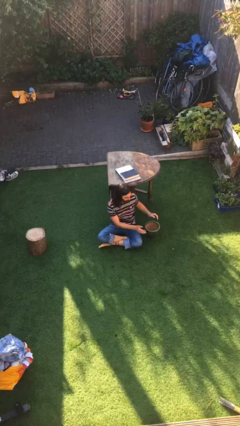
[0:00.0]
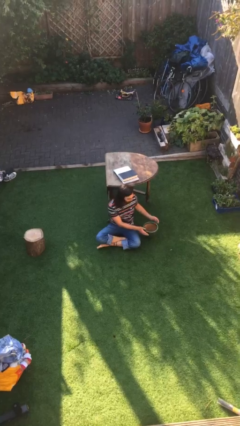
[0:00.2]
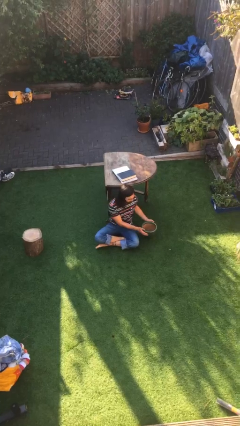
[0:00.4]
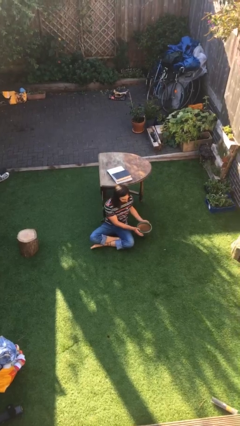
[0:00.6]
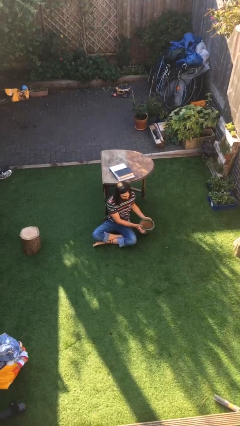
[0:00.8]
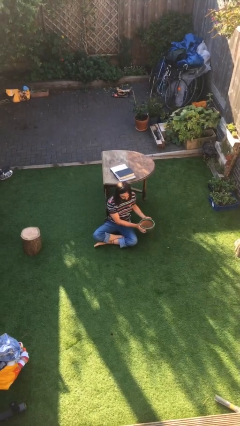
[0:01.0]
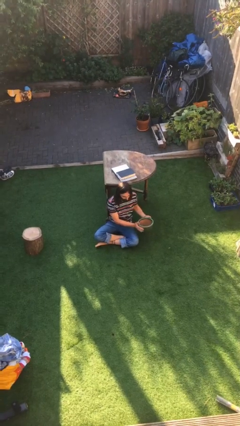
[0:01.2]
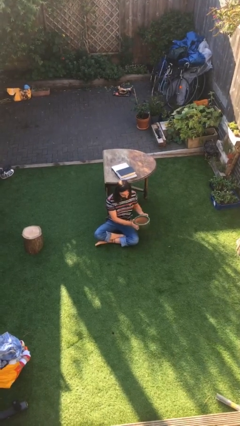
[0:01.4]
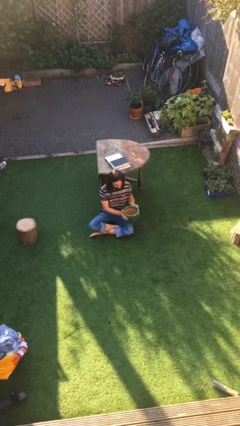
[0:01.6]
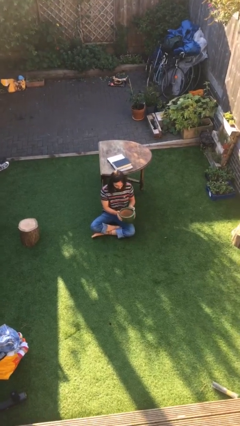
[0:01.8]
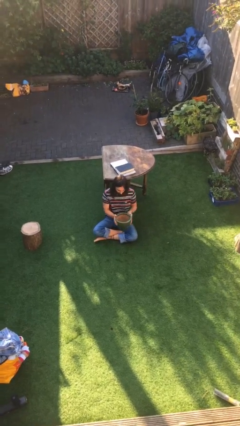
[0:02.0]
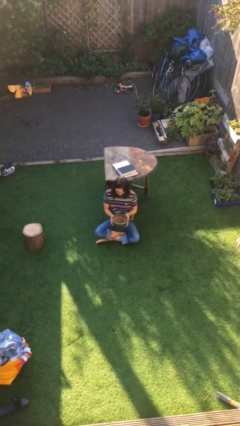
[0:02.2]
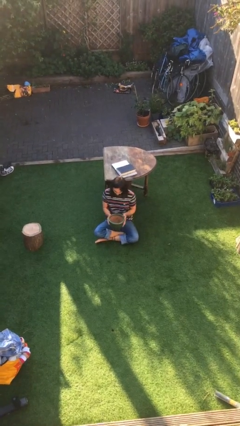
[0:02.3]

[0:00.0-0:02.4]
person picks up object from floor

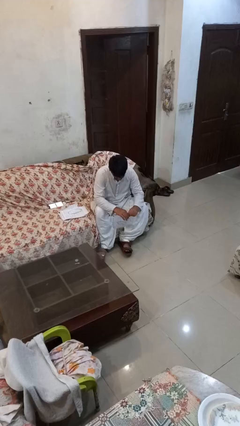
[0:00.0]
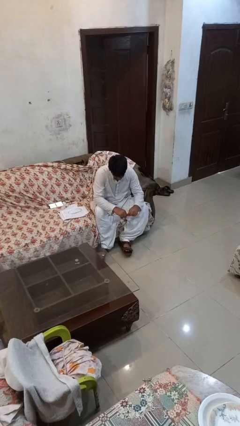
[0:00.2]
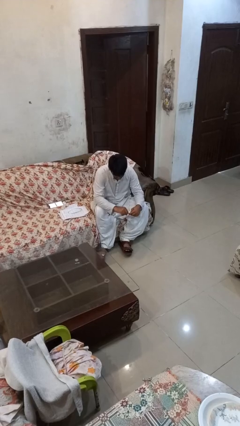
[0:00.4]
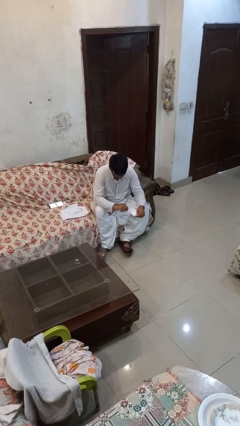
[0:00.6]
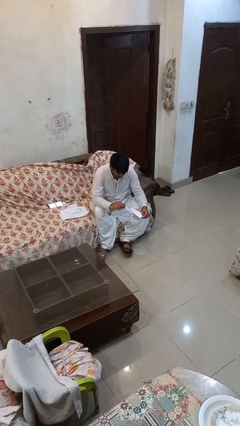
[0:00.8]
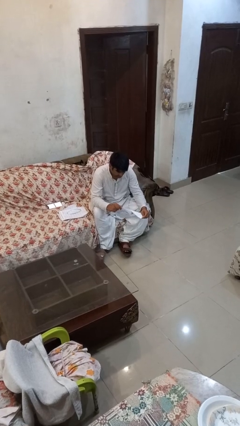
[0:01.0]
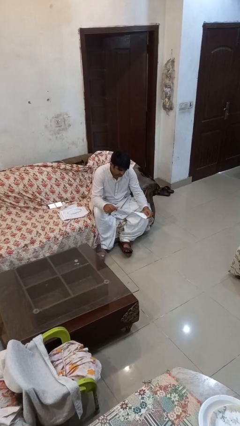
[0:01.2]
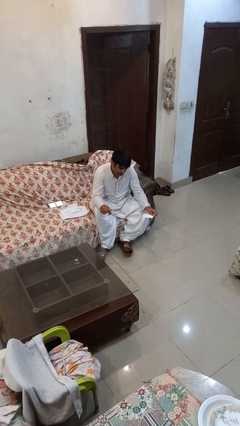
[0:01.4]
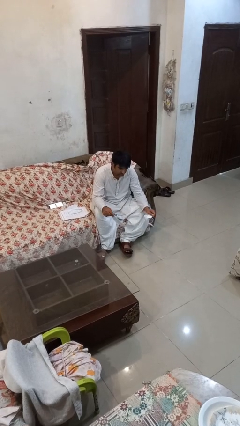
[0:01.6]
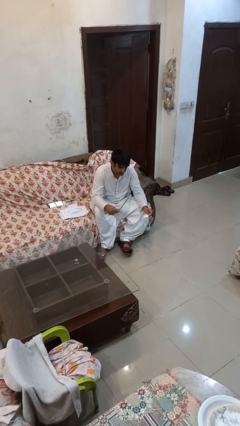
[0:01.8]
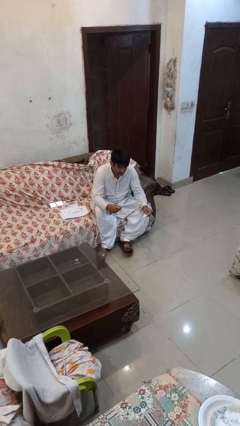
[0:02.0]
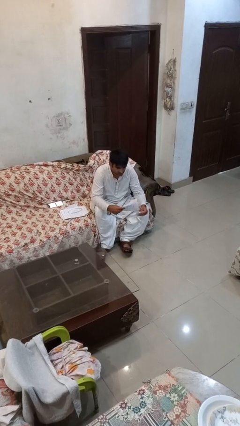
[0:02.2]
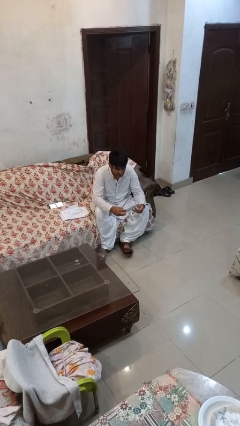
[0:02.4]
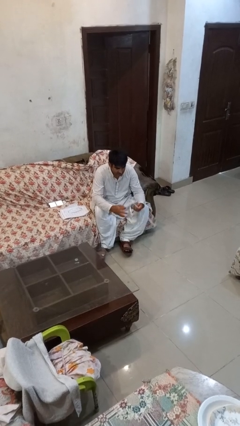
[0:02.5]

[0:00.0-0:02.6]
person tears paper

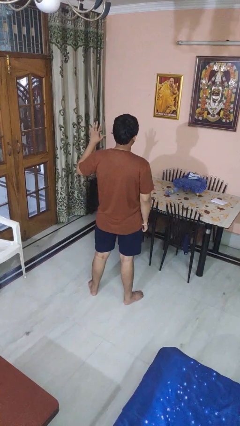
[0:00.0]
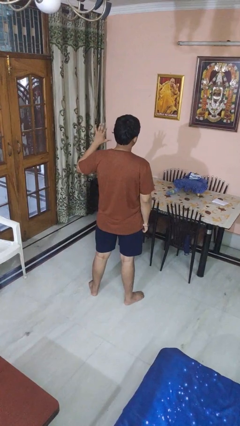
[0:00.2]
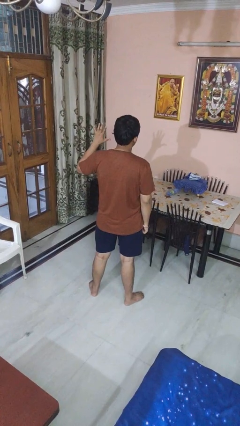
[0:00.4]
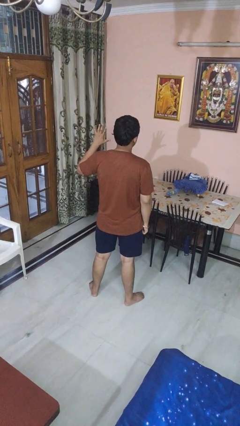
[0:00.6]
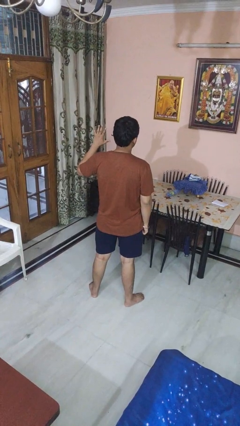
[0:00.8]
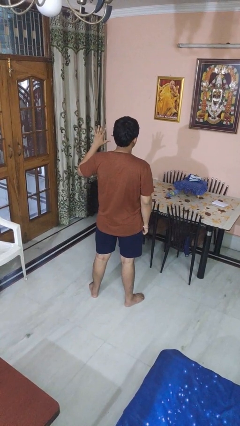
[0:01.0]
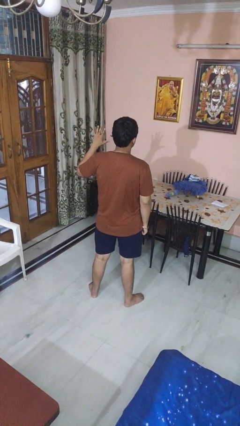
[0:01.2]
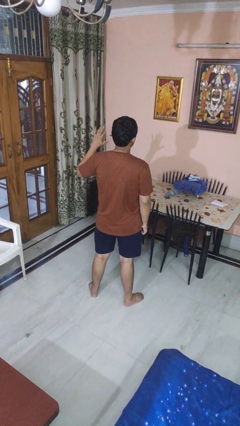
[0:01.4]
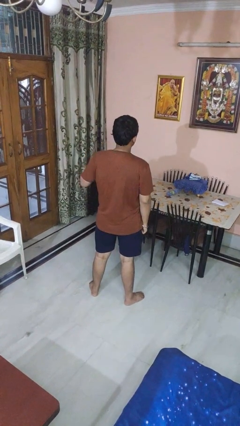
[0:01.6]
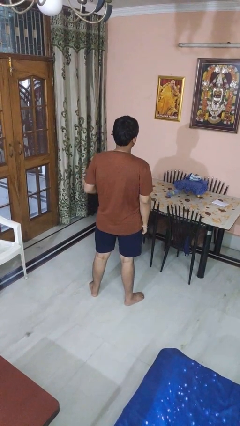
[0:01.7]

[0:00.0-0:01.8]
person gestures number five

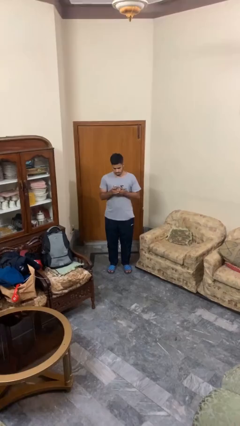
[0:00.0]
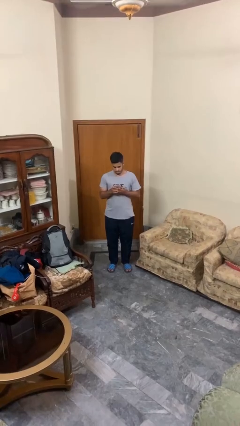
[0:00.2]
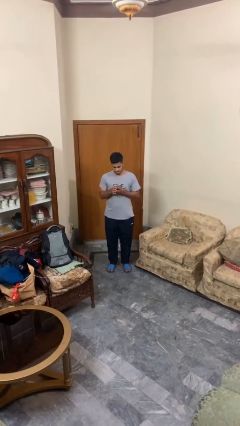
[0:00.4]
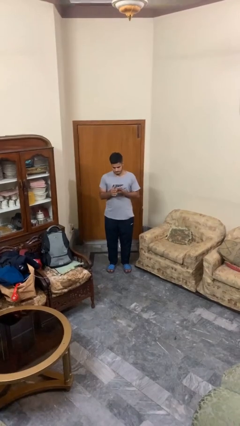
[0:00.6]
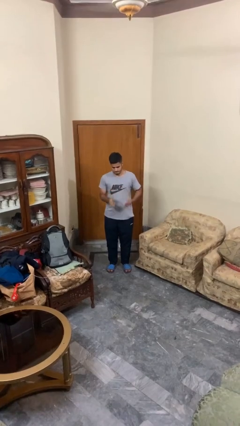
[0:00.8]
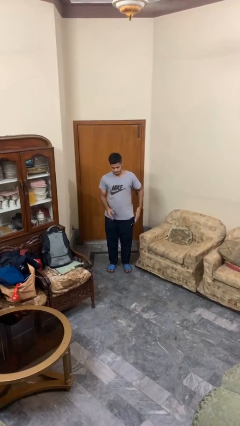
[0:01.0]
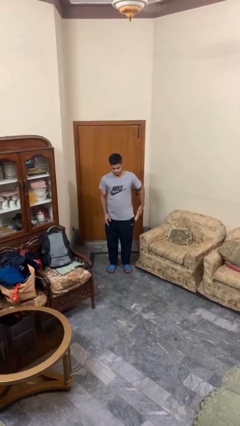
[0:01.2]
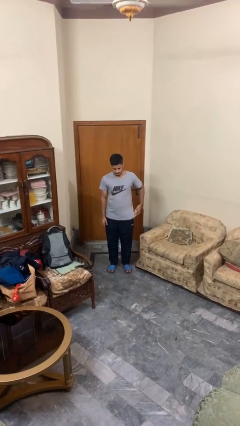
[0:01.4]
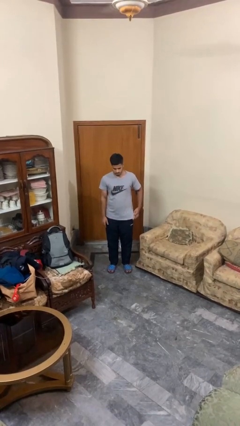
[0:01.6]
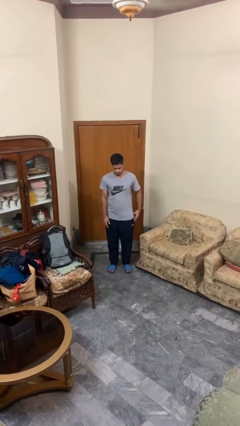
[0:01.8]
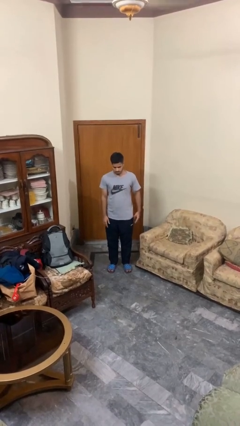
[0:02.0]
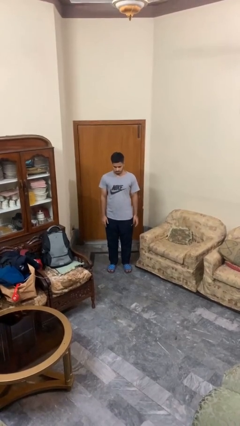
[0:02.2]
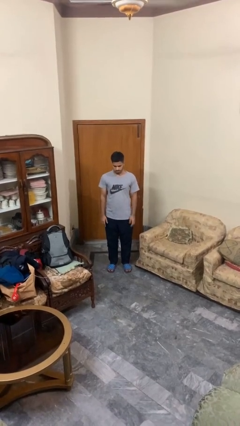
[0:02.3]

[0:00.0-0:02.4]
person puts phone into pocket

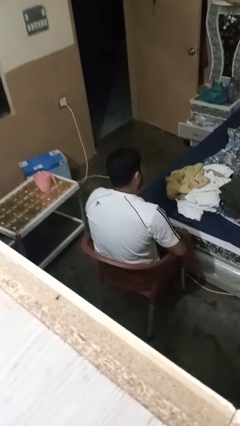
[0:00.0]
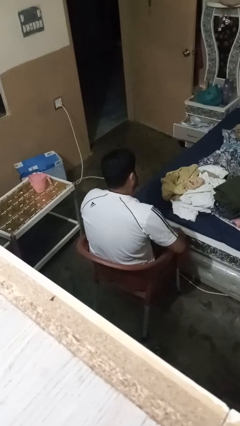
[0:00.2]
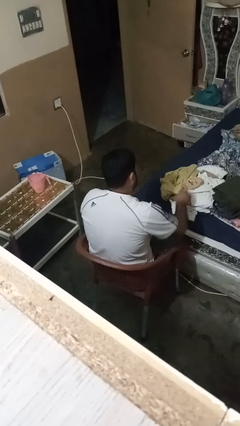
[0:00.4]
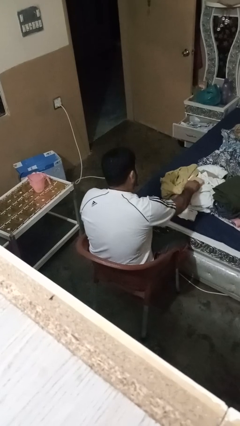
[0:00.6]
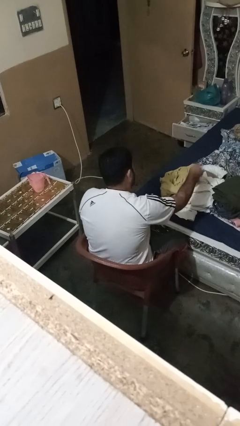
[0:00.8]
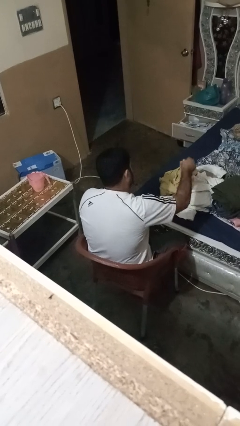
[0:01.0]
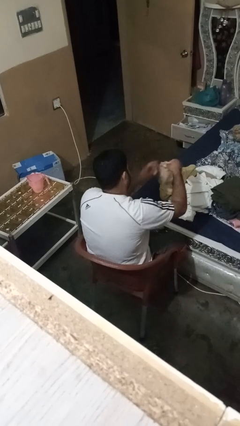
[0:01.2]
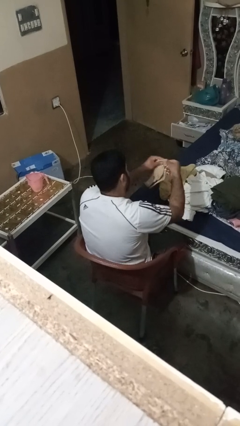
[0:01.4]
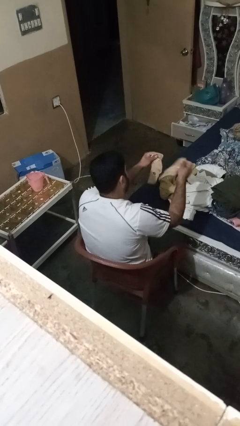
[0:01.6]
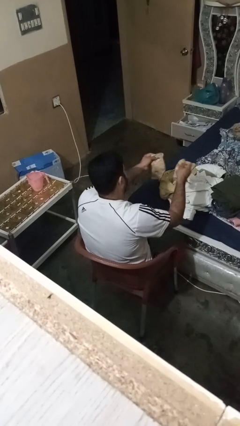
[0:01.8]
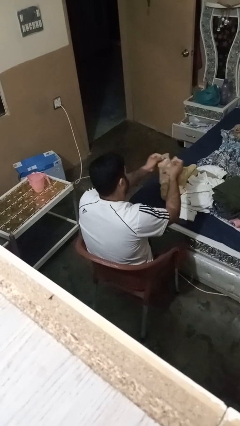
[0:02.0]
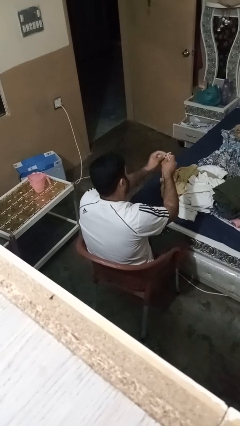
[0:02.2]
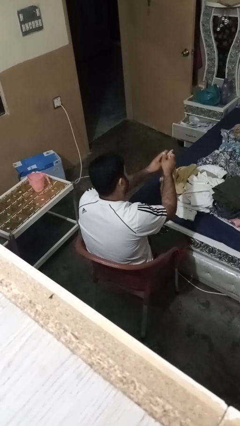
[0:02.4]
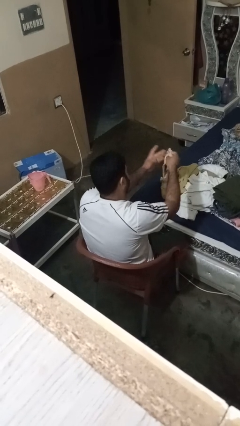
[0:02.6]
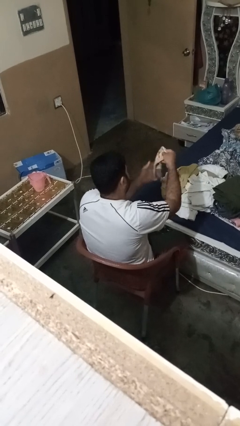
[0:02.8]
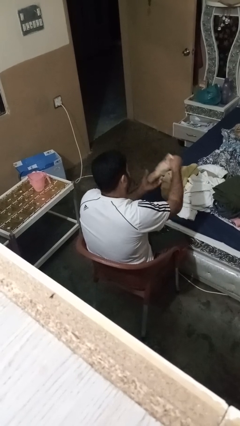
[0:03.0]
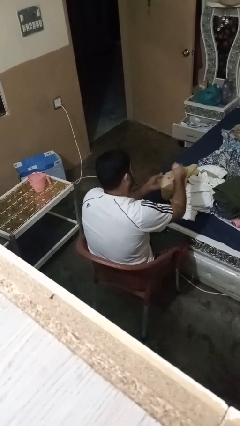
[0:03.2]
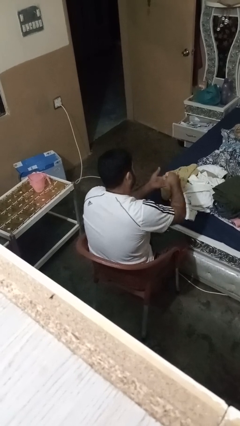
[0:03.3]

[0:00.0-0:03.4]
person folds socks

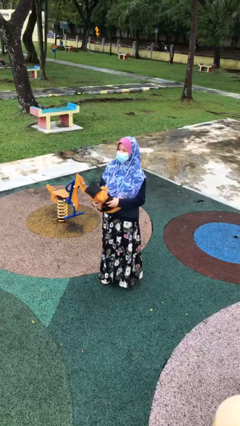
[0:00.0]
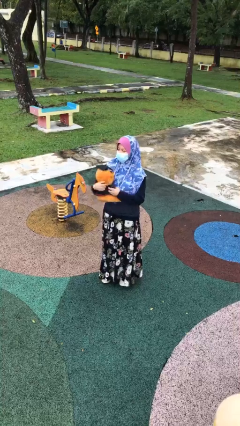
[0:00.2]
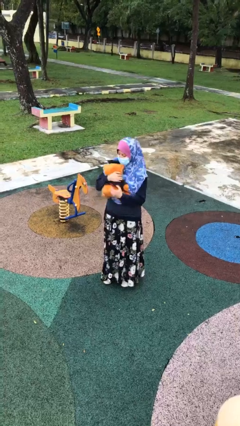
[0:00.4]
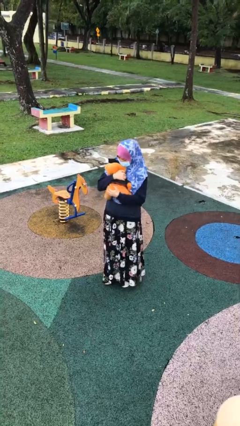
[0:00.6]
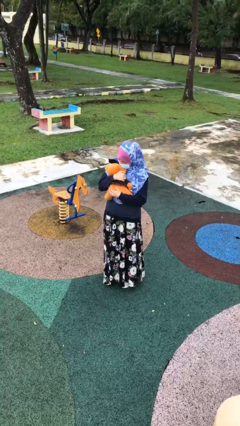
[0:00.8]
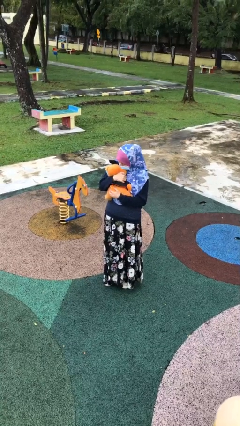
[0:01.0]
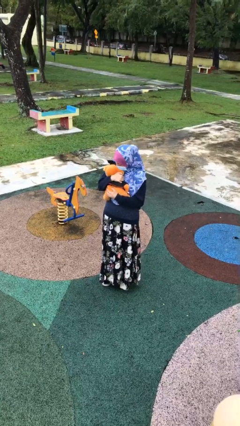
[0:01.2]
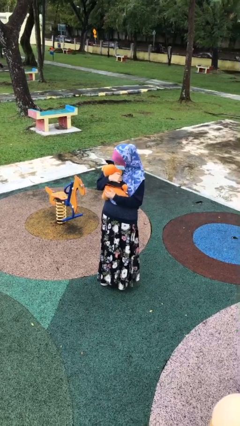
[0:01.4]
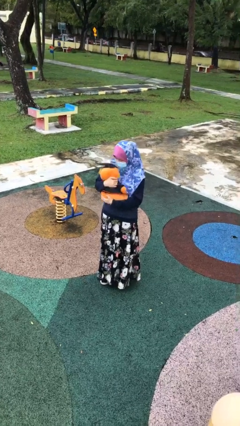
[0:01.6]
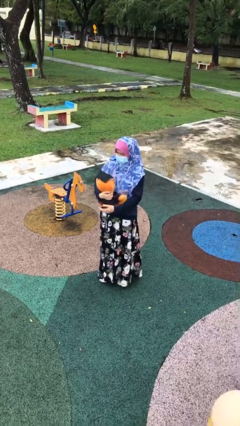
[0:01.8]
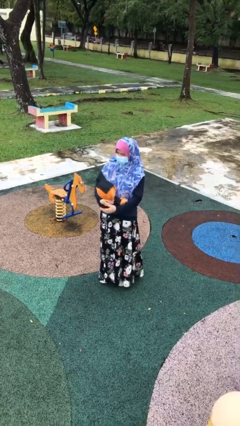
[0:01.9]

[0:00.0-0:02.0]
person hugs stuffed animal

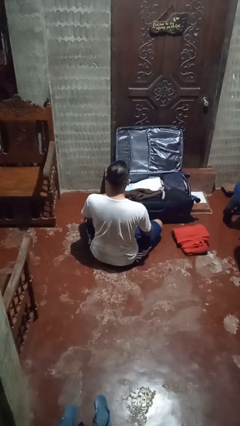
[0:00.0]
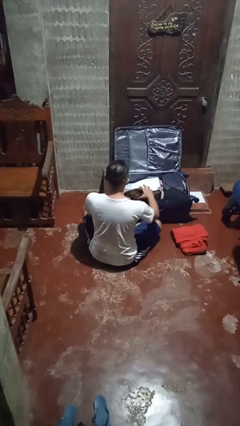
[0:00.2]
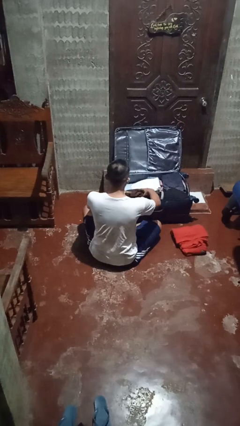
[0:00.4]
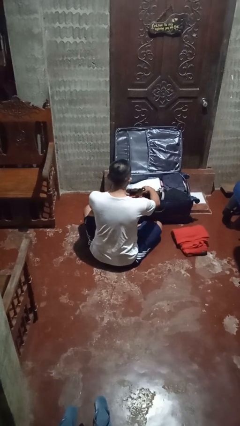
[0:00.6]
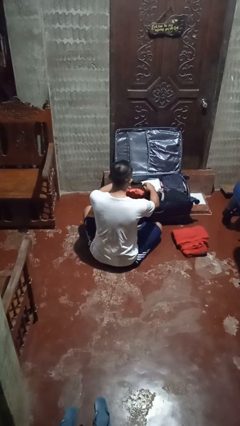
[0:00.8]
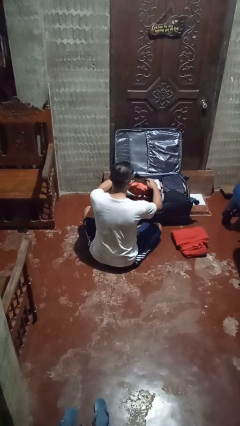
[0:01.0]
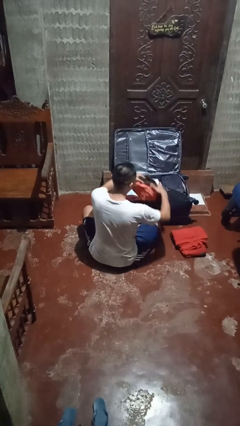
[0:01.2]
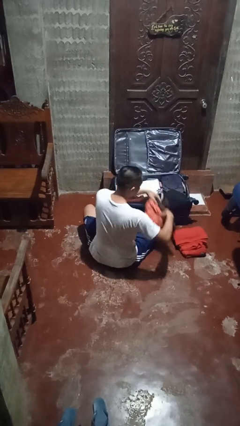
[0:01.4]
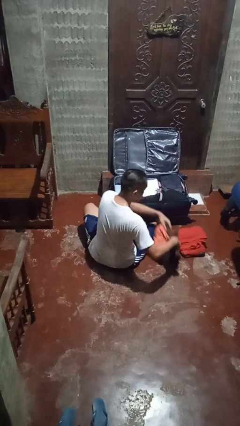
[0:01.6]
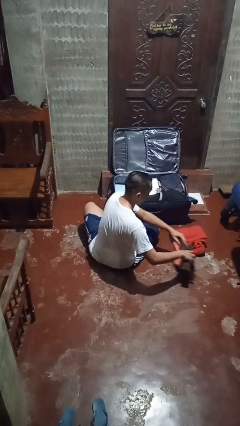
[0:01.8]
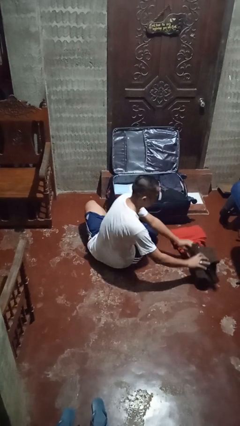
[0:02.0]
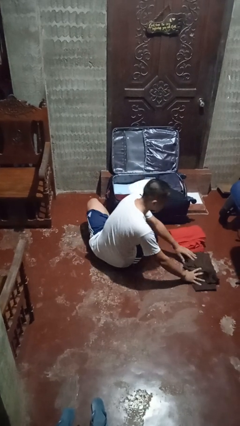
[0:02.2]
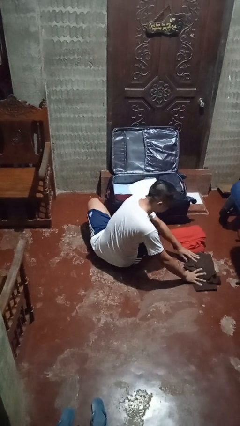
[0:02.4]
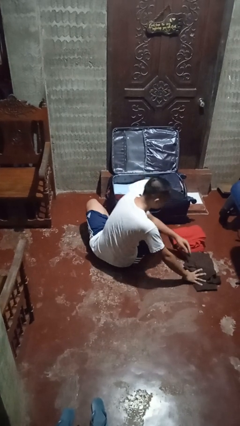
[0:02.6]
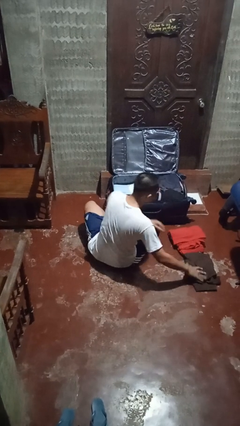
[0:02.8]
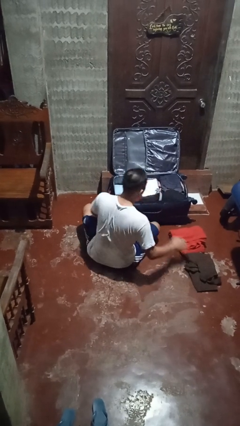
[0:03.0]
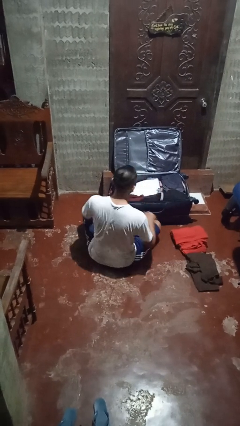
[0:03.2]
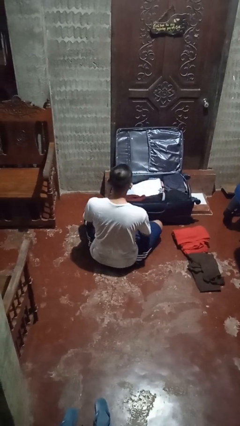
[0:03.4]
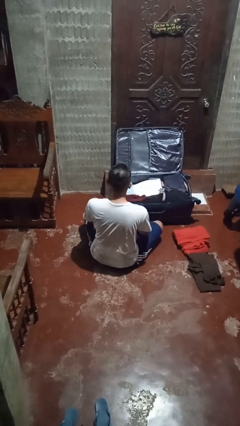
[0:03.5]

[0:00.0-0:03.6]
person unloads clothes from suitcase
